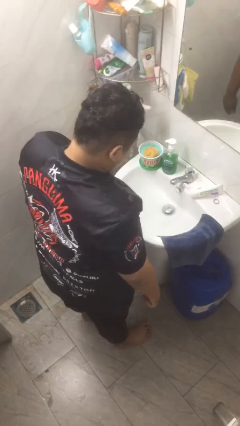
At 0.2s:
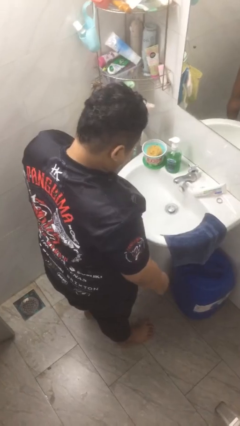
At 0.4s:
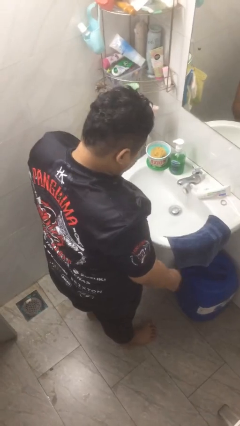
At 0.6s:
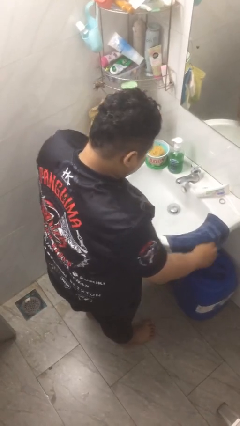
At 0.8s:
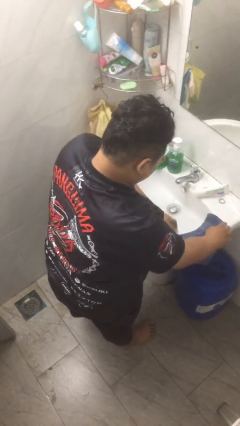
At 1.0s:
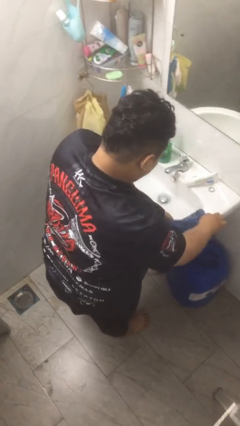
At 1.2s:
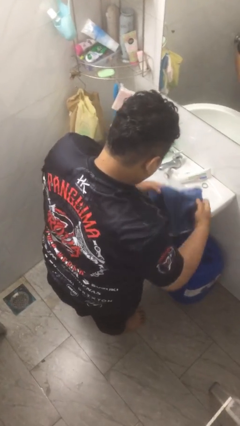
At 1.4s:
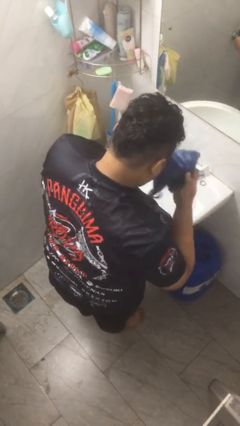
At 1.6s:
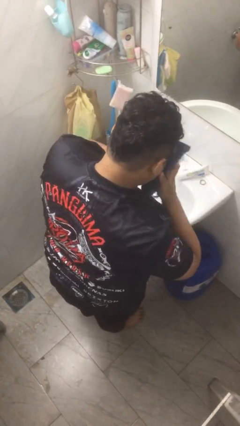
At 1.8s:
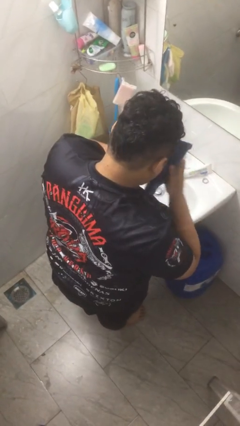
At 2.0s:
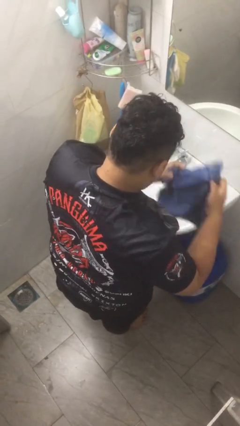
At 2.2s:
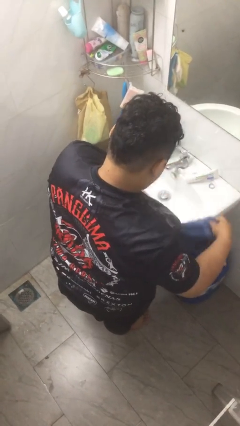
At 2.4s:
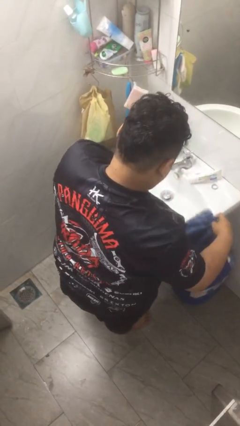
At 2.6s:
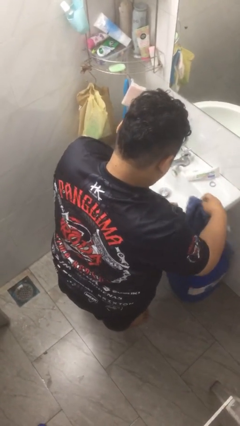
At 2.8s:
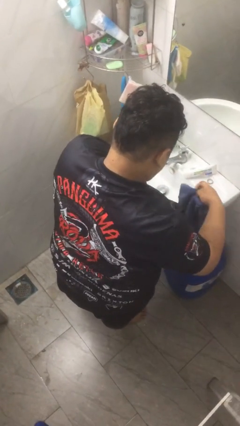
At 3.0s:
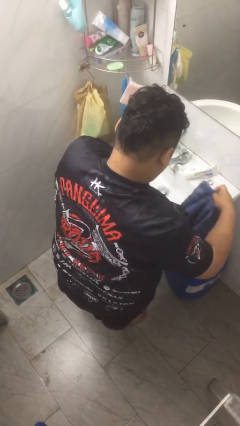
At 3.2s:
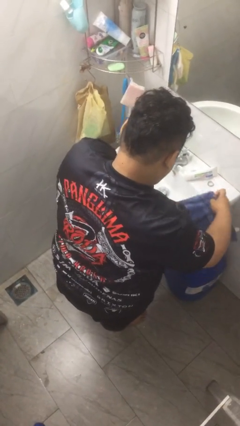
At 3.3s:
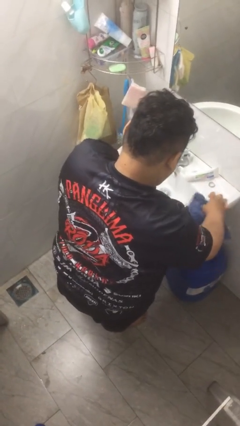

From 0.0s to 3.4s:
person dries face with towel

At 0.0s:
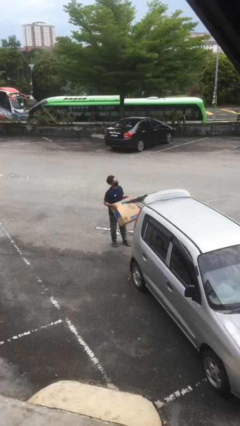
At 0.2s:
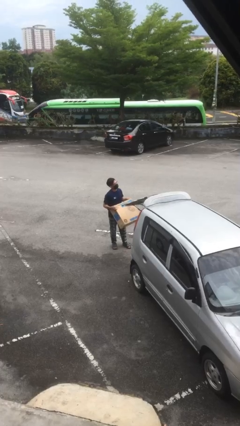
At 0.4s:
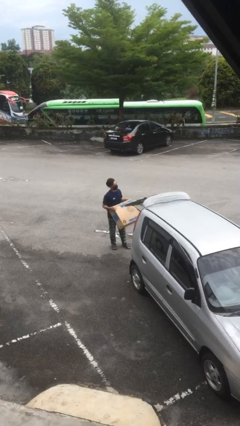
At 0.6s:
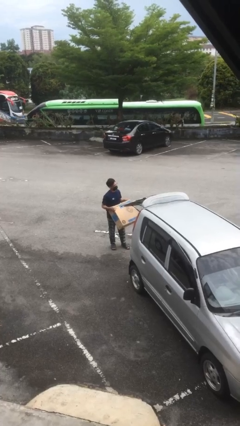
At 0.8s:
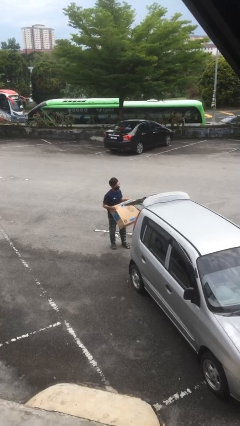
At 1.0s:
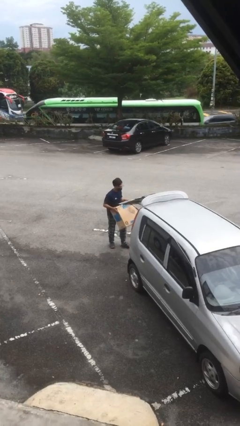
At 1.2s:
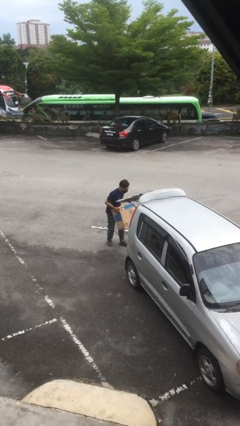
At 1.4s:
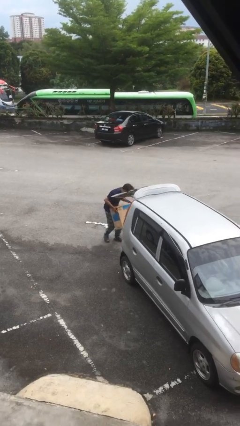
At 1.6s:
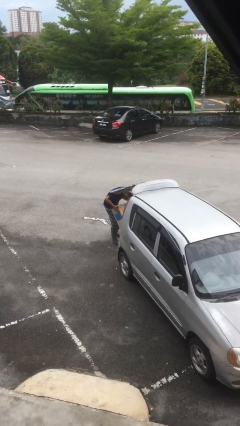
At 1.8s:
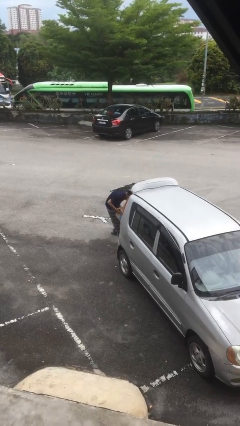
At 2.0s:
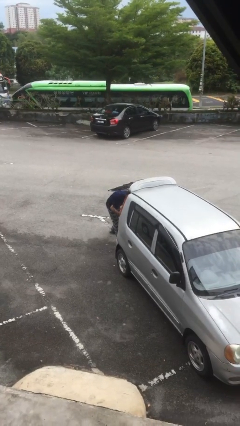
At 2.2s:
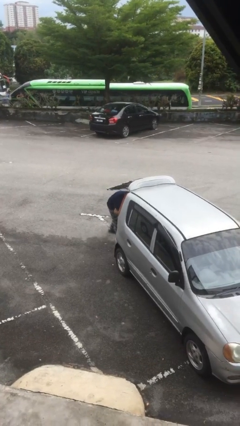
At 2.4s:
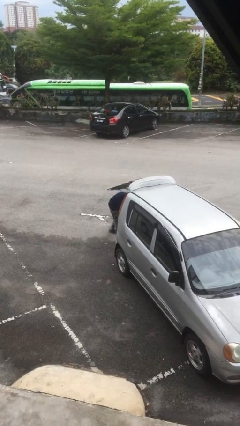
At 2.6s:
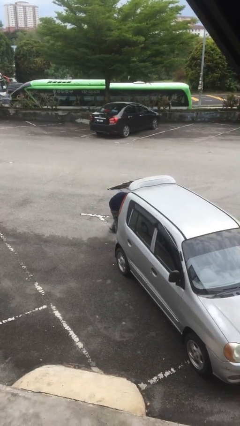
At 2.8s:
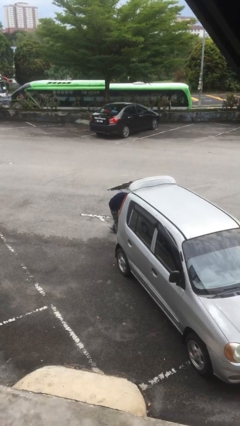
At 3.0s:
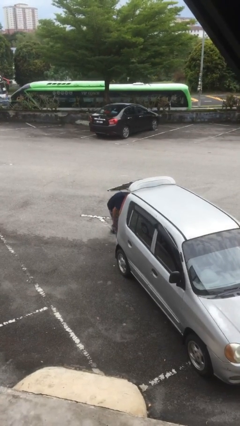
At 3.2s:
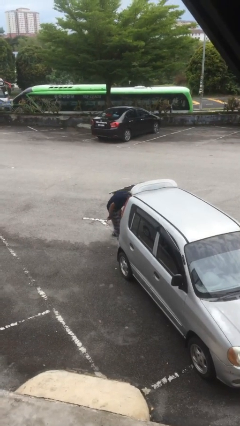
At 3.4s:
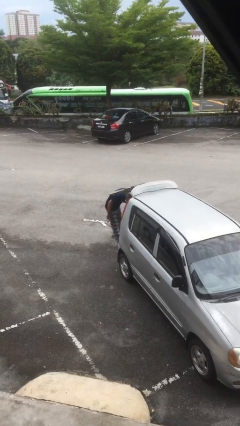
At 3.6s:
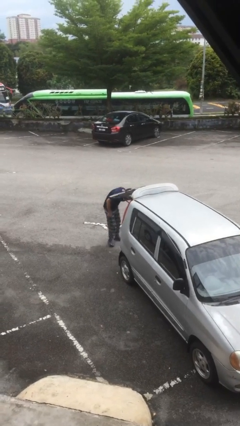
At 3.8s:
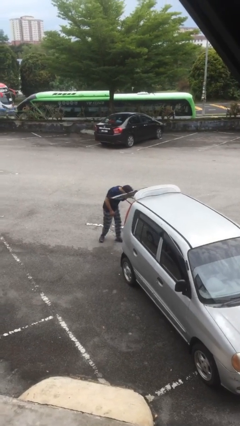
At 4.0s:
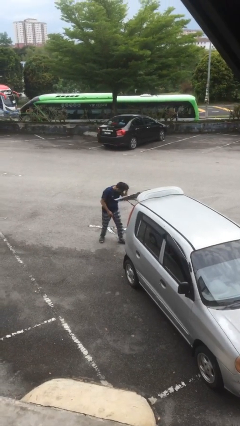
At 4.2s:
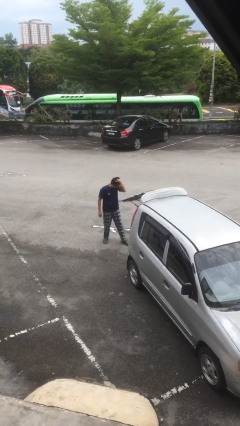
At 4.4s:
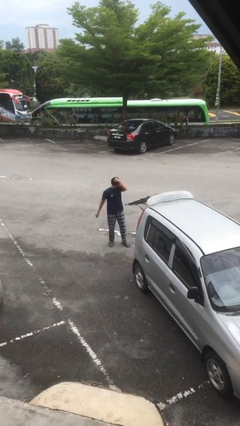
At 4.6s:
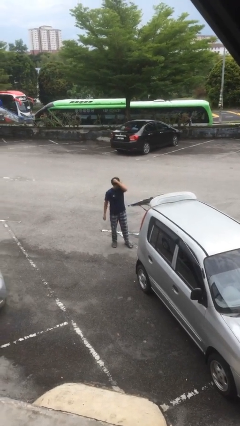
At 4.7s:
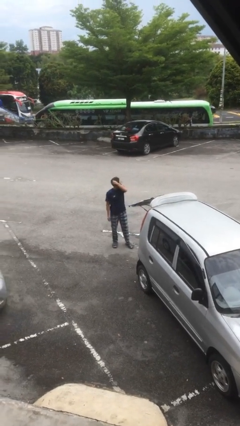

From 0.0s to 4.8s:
person loads car

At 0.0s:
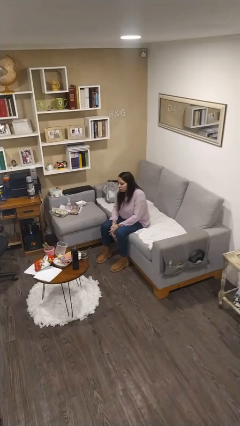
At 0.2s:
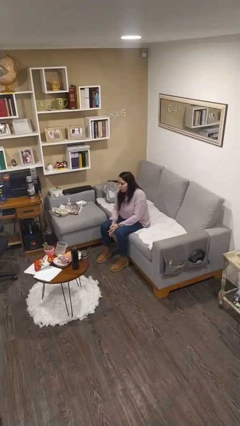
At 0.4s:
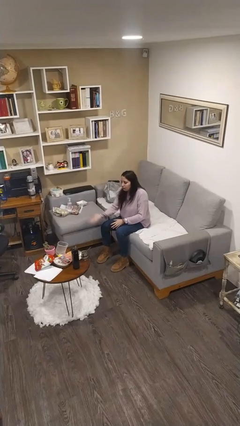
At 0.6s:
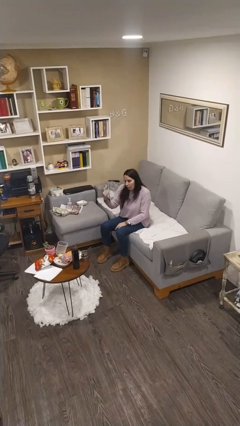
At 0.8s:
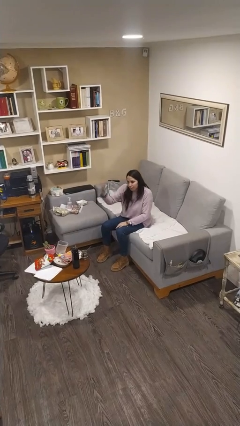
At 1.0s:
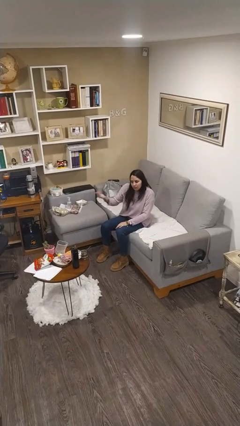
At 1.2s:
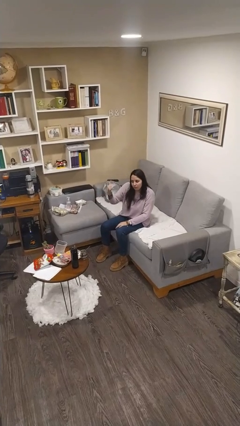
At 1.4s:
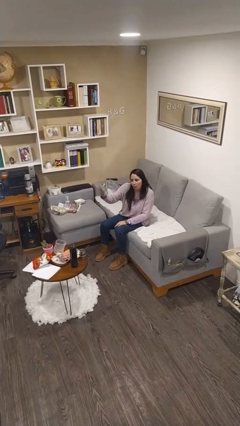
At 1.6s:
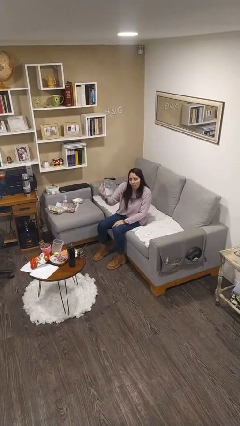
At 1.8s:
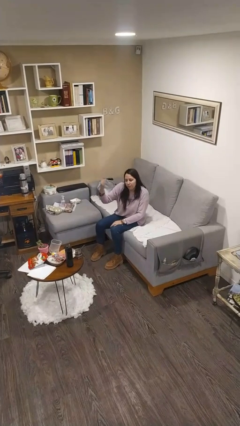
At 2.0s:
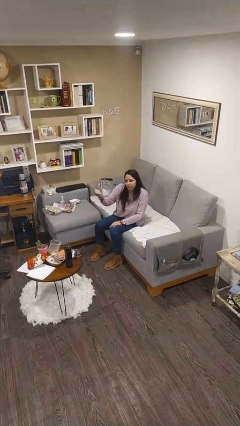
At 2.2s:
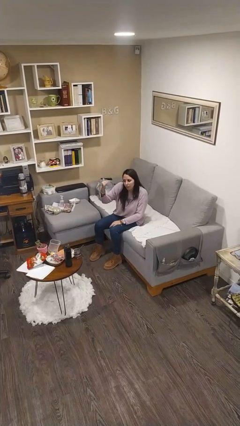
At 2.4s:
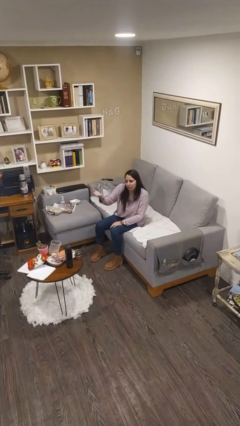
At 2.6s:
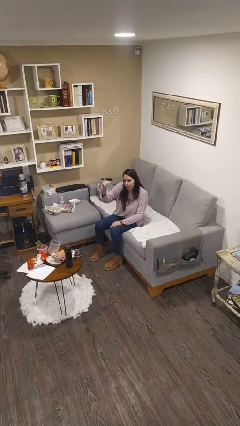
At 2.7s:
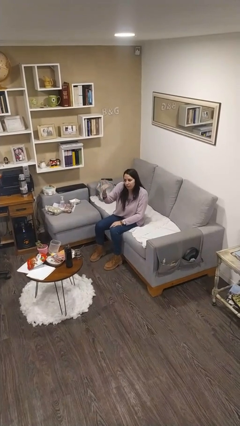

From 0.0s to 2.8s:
person gestures come here

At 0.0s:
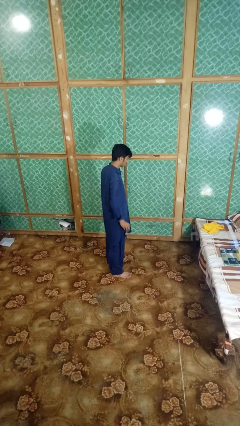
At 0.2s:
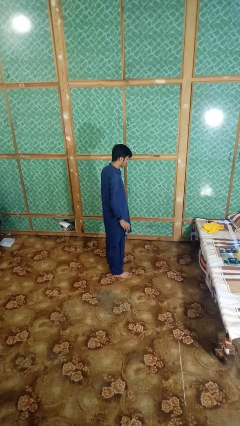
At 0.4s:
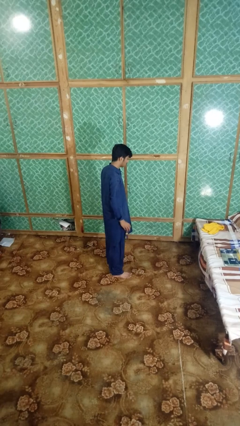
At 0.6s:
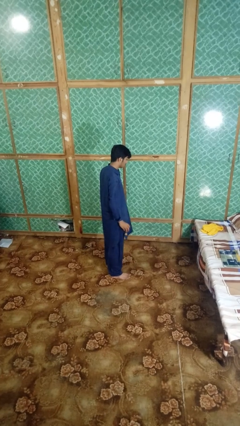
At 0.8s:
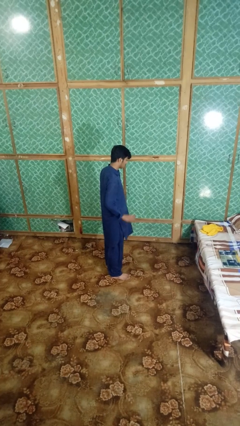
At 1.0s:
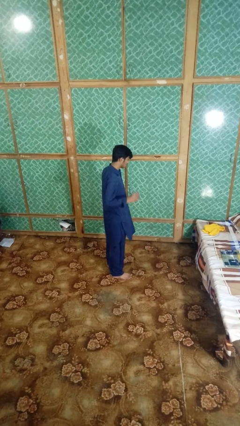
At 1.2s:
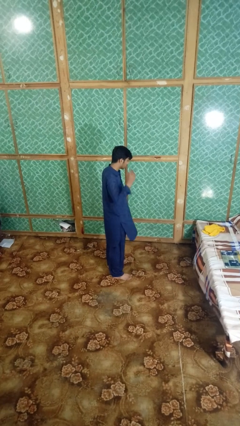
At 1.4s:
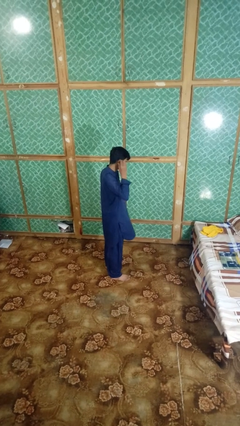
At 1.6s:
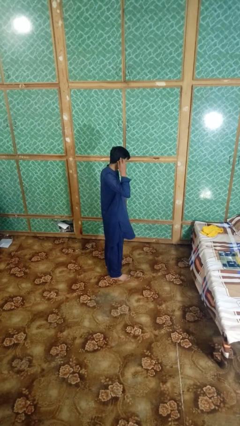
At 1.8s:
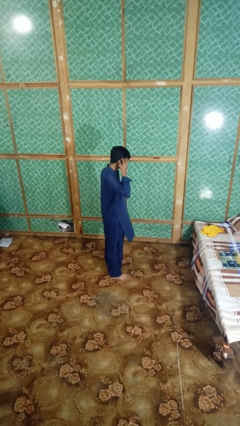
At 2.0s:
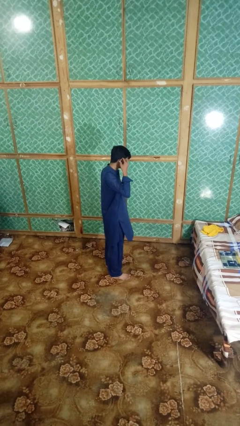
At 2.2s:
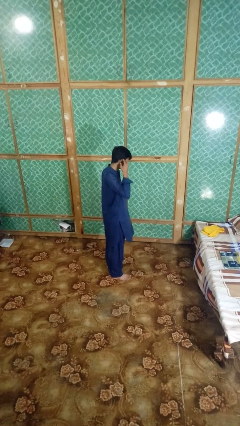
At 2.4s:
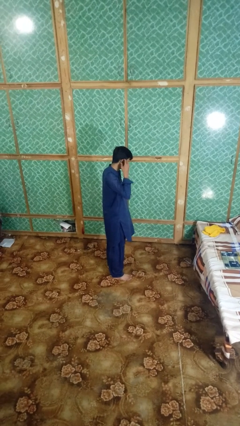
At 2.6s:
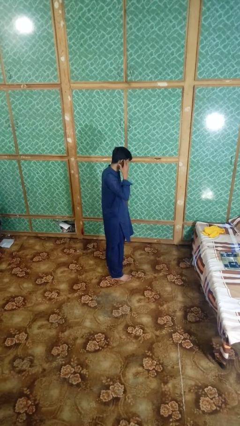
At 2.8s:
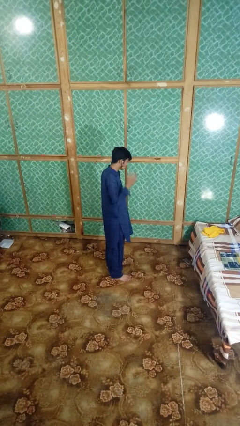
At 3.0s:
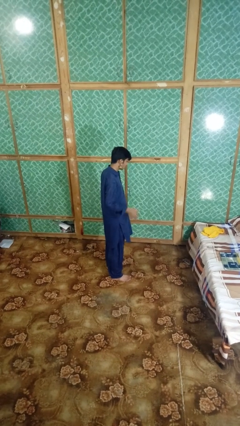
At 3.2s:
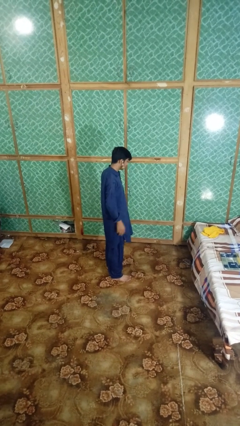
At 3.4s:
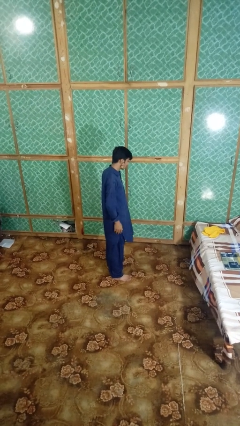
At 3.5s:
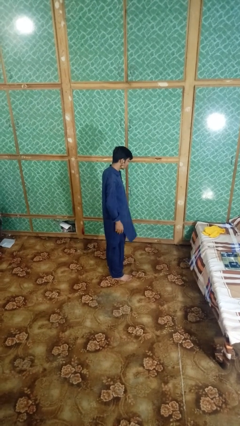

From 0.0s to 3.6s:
person puts on earrings

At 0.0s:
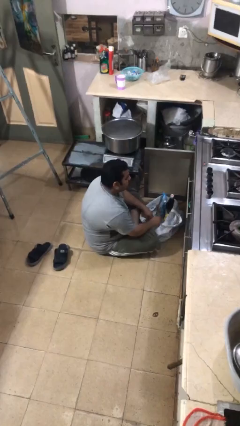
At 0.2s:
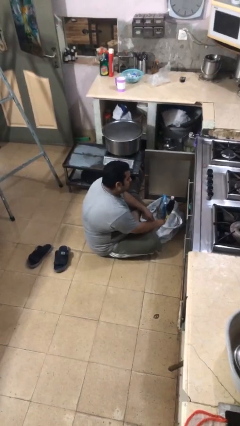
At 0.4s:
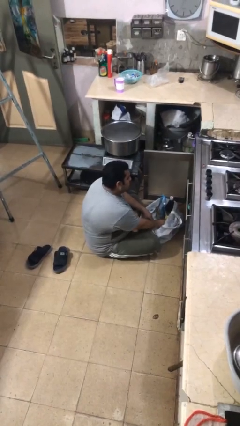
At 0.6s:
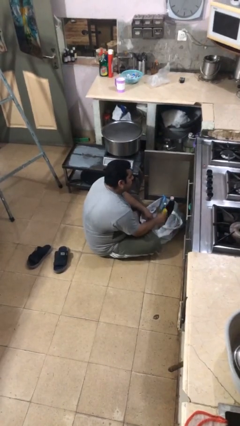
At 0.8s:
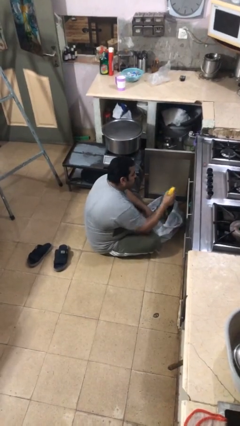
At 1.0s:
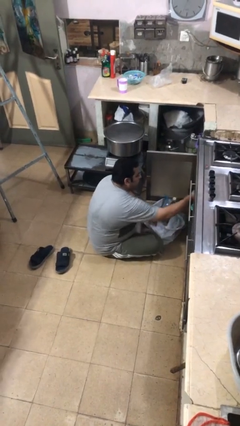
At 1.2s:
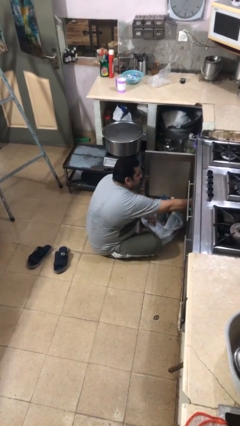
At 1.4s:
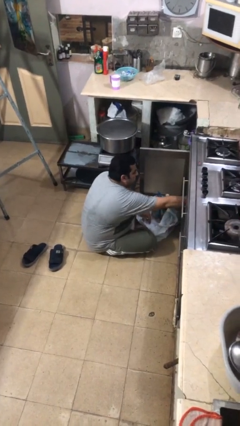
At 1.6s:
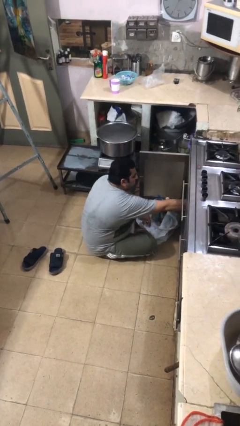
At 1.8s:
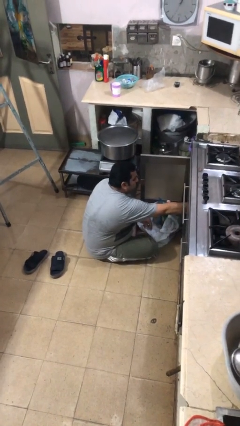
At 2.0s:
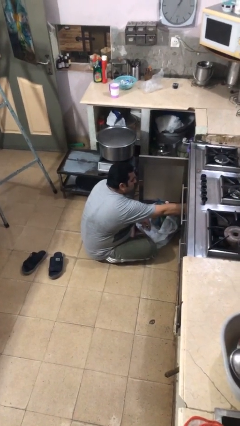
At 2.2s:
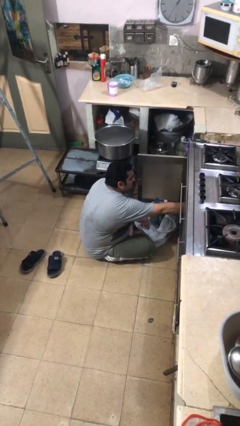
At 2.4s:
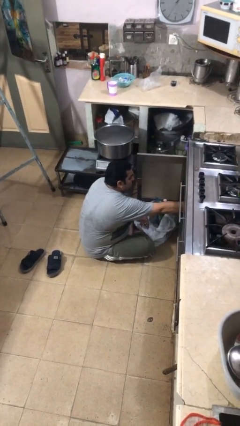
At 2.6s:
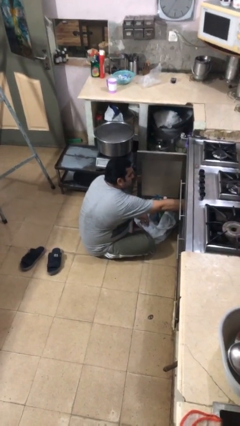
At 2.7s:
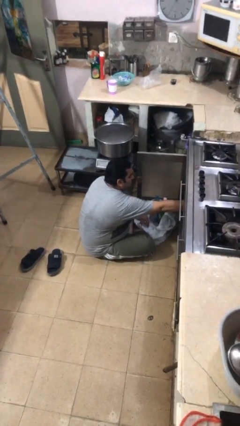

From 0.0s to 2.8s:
person loads groceries into cabinet
